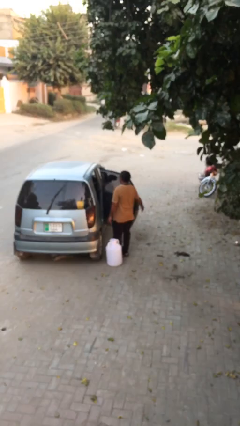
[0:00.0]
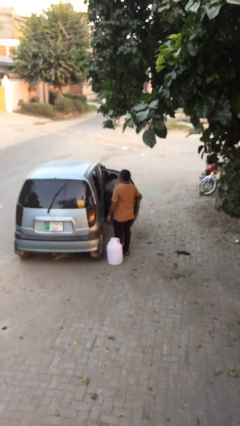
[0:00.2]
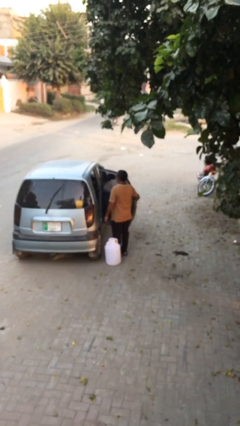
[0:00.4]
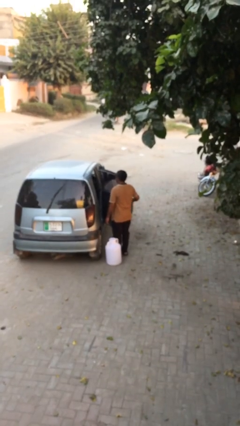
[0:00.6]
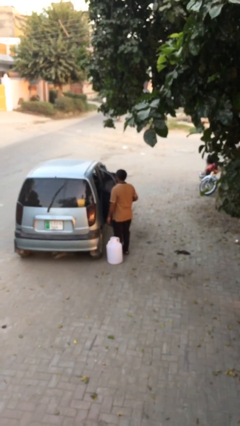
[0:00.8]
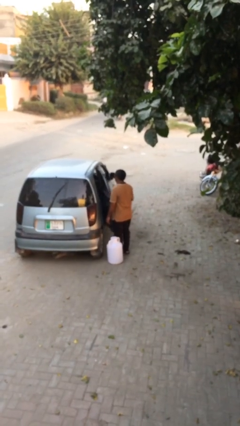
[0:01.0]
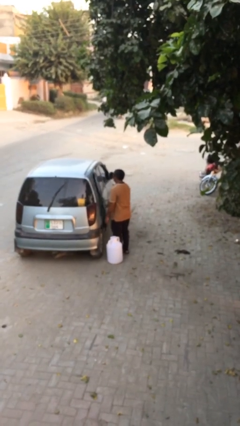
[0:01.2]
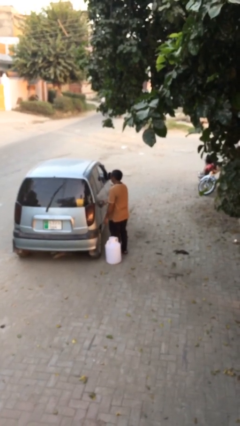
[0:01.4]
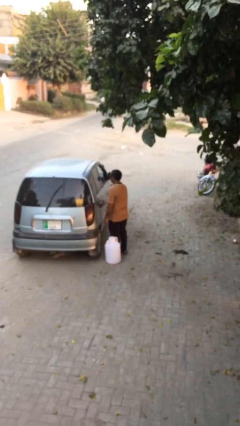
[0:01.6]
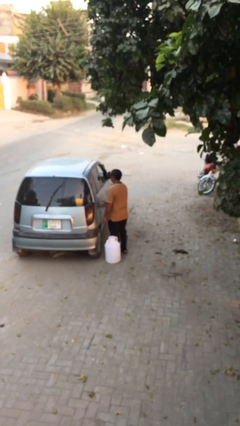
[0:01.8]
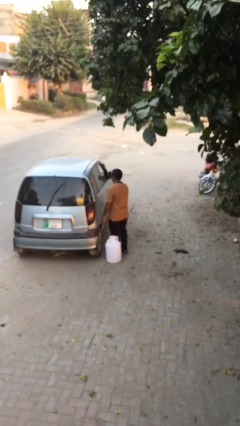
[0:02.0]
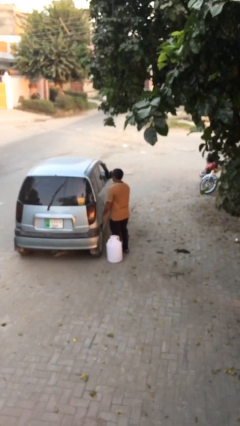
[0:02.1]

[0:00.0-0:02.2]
person closes car door

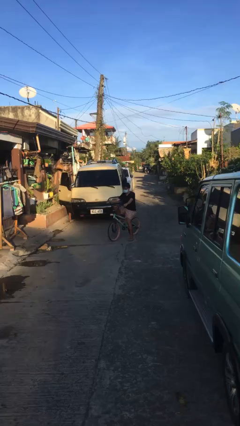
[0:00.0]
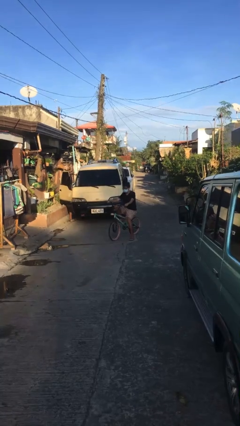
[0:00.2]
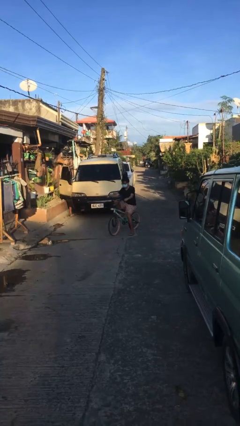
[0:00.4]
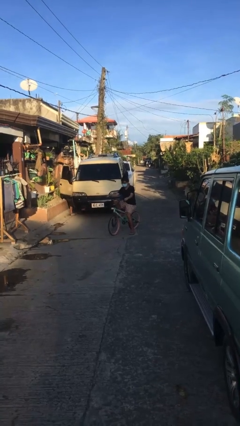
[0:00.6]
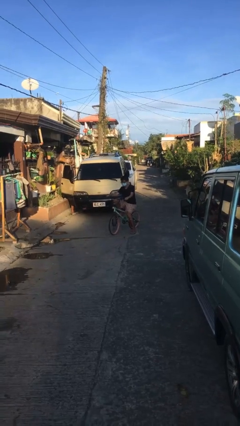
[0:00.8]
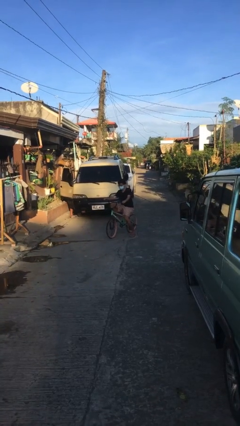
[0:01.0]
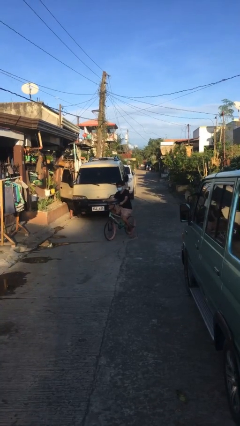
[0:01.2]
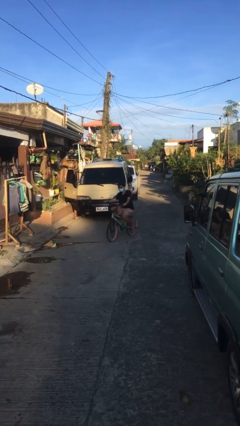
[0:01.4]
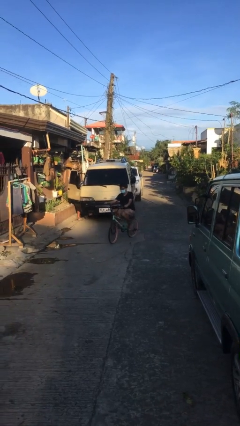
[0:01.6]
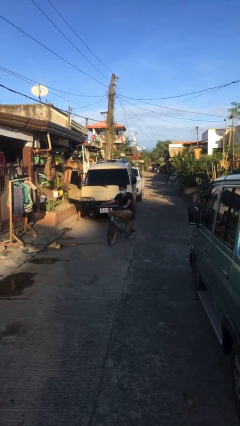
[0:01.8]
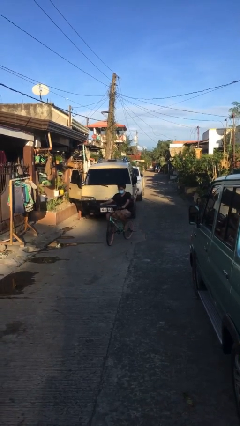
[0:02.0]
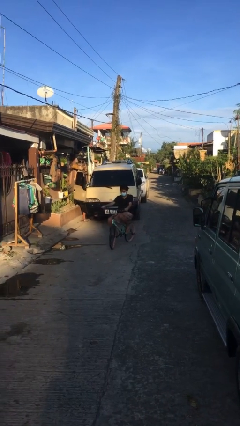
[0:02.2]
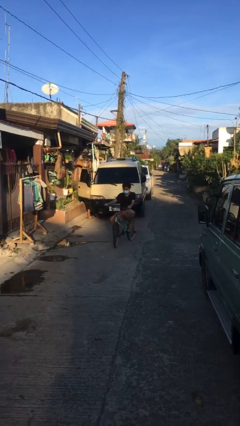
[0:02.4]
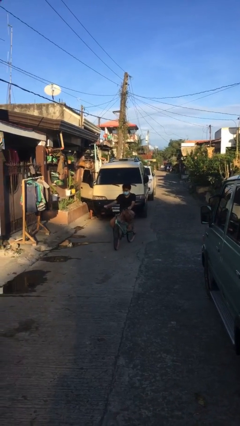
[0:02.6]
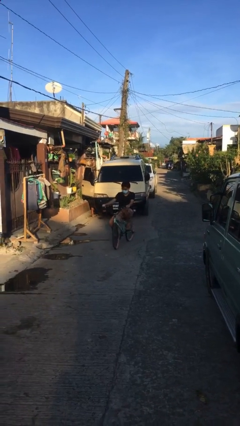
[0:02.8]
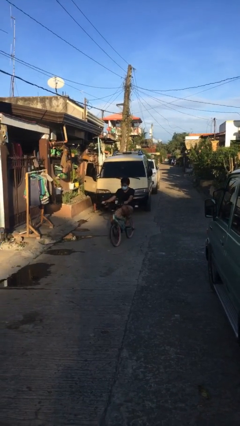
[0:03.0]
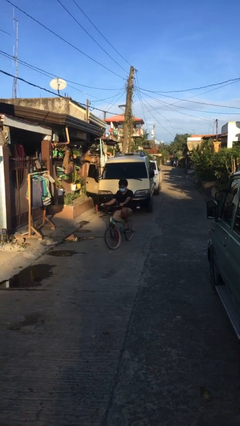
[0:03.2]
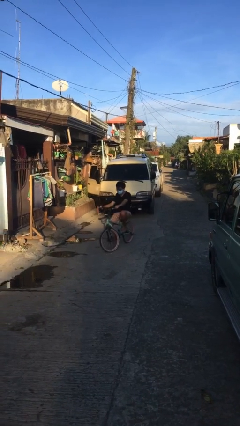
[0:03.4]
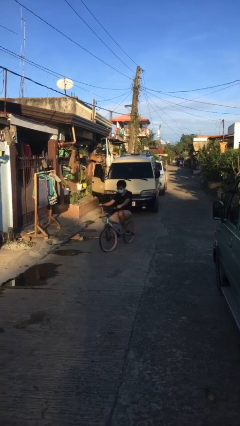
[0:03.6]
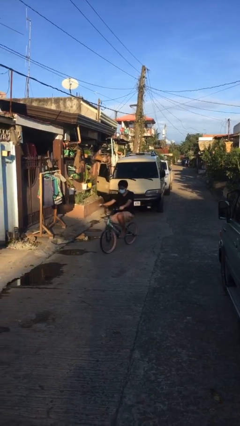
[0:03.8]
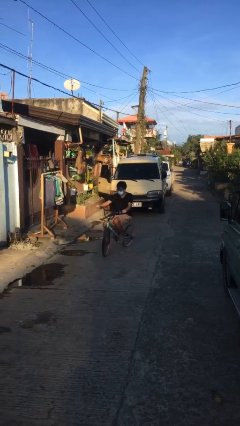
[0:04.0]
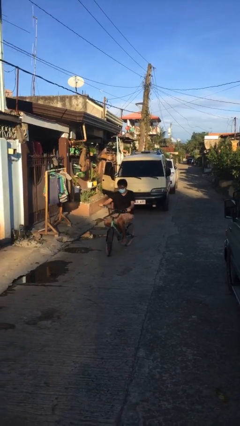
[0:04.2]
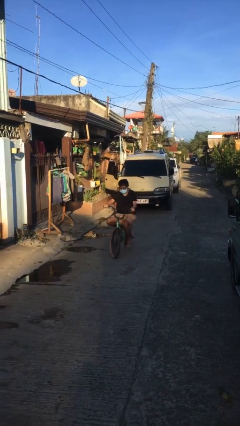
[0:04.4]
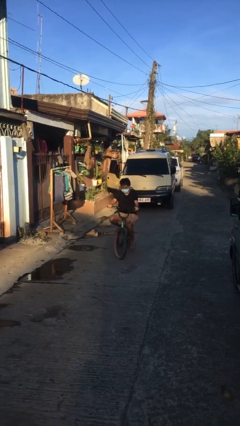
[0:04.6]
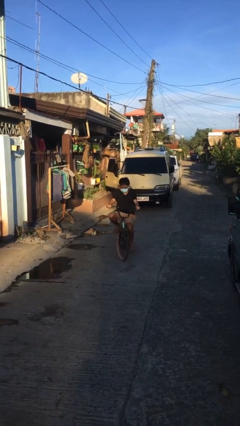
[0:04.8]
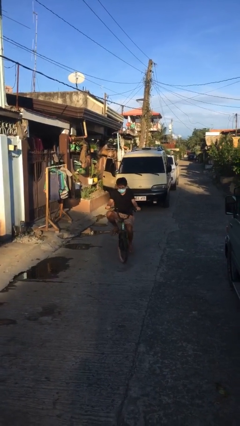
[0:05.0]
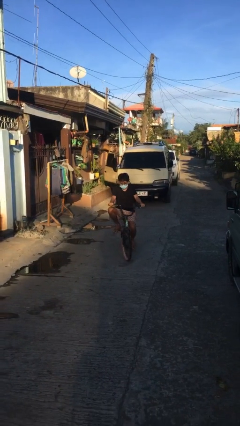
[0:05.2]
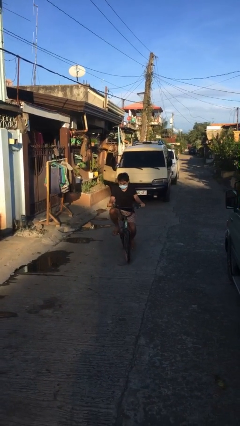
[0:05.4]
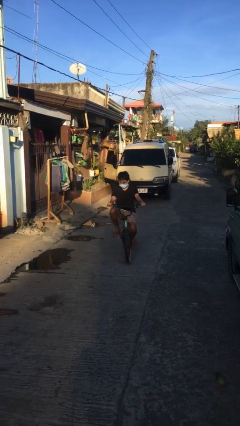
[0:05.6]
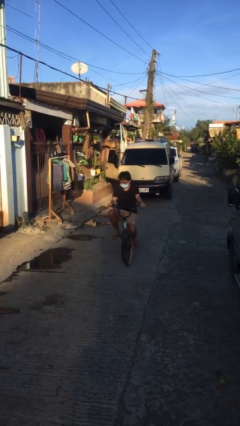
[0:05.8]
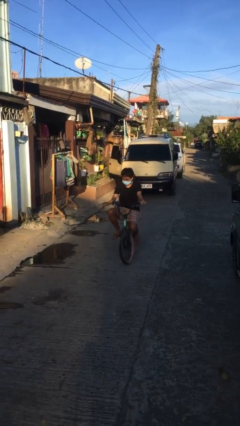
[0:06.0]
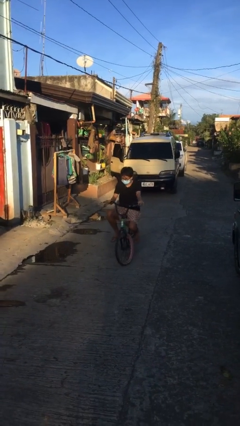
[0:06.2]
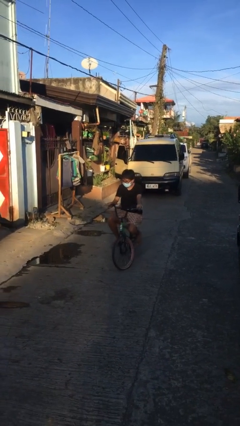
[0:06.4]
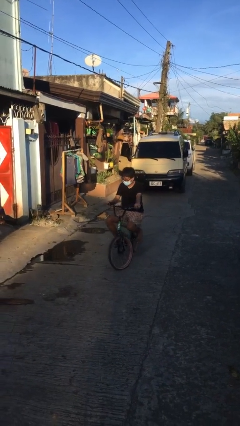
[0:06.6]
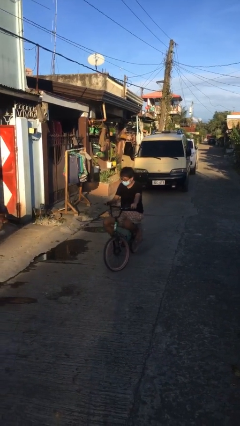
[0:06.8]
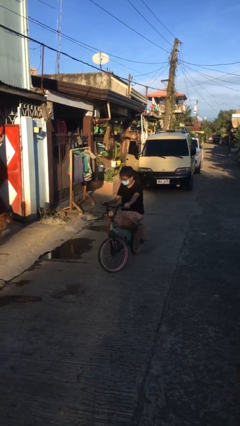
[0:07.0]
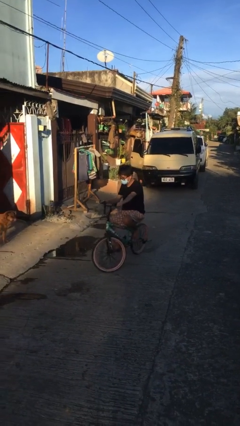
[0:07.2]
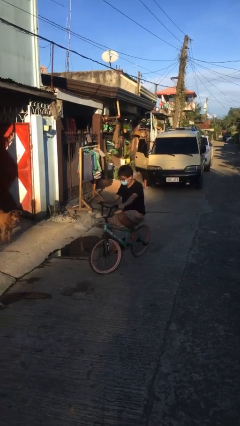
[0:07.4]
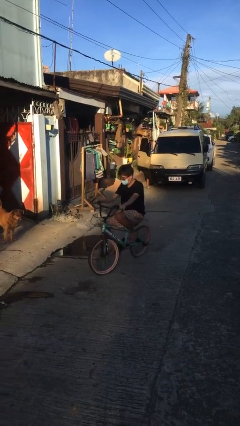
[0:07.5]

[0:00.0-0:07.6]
person rides bicycle

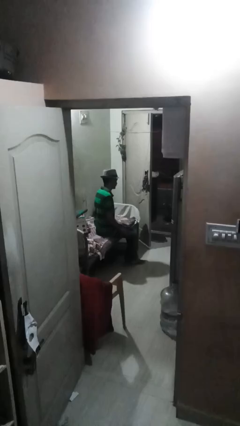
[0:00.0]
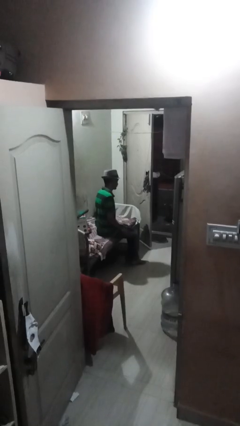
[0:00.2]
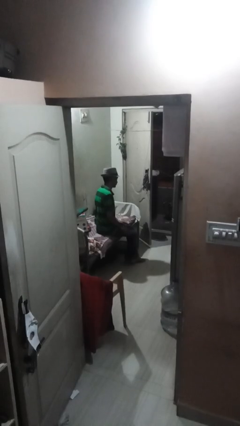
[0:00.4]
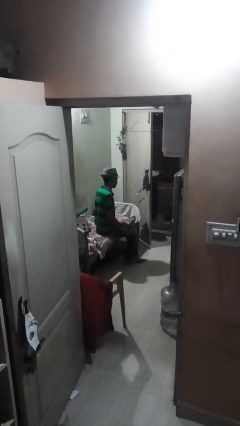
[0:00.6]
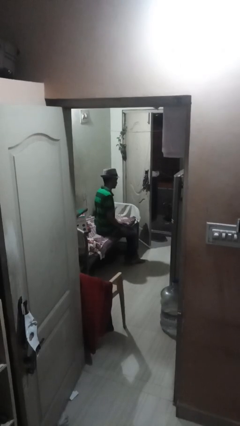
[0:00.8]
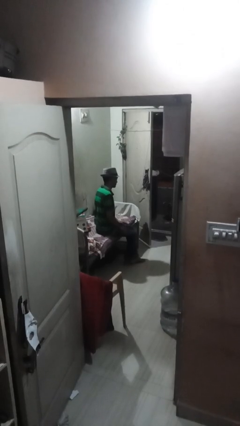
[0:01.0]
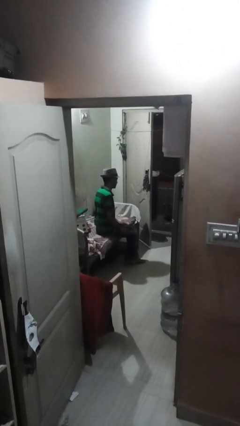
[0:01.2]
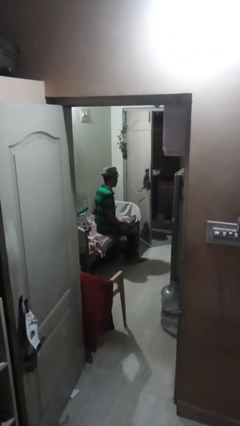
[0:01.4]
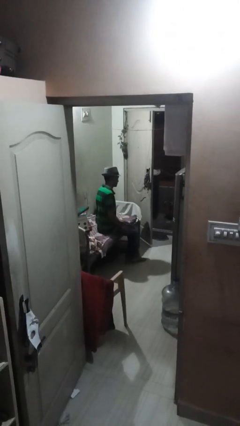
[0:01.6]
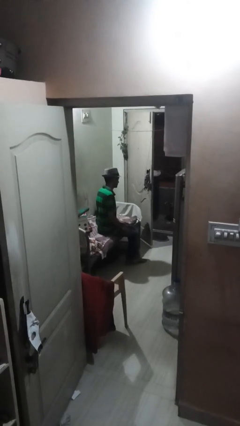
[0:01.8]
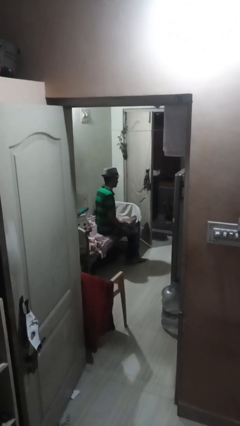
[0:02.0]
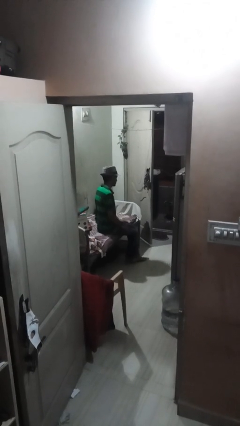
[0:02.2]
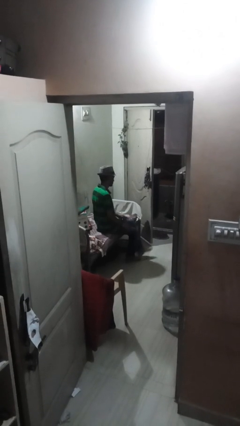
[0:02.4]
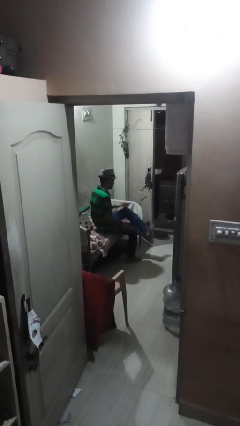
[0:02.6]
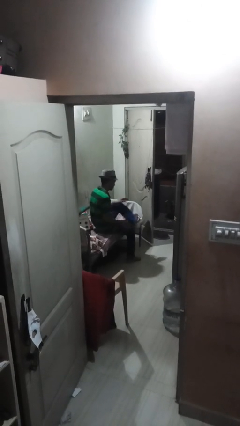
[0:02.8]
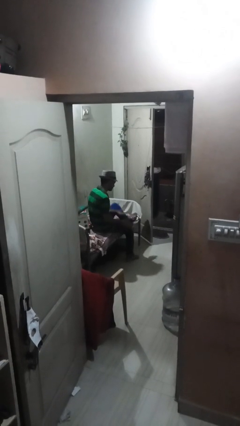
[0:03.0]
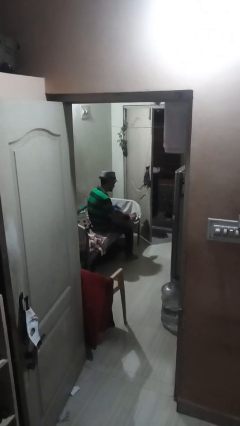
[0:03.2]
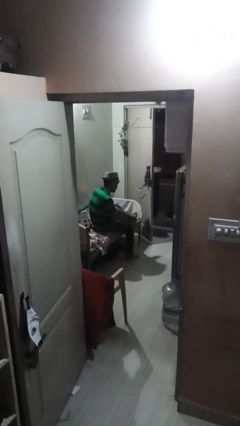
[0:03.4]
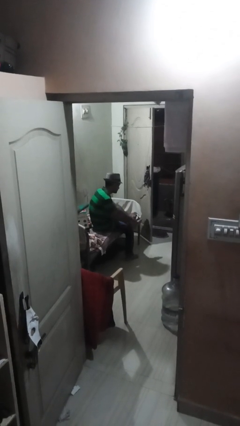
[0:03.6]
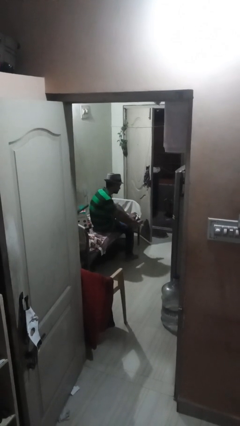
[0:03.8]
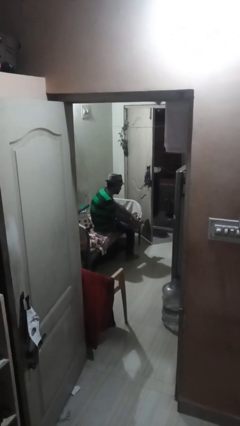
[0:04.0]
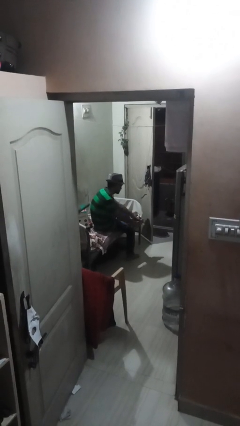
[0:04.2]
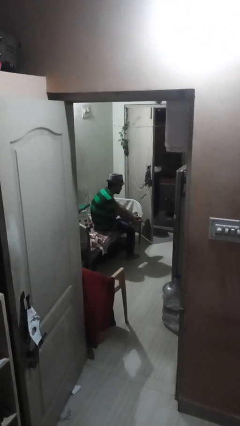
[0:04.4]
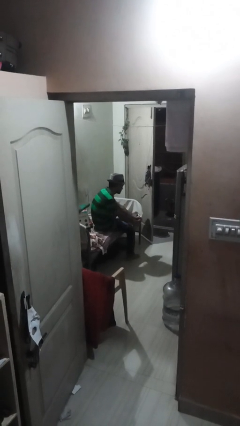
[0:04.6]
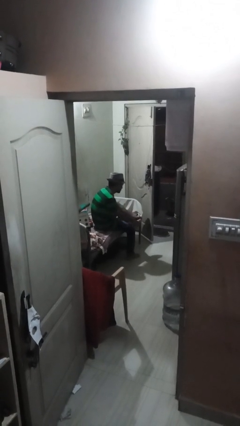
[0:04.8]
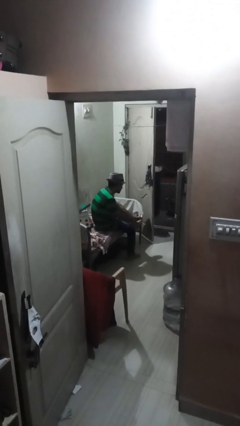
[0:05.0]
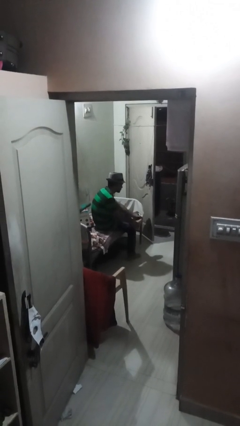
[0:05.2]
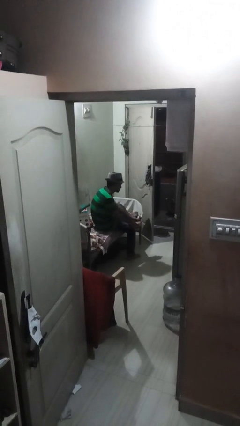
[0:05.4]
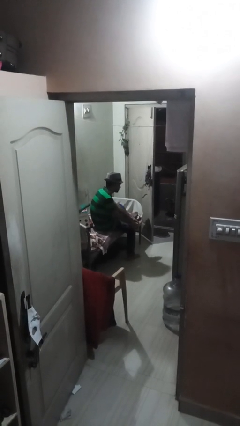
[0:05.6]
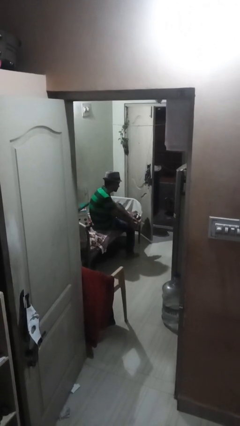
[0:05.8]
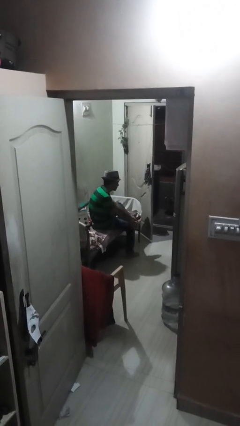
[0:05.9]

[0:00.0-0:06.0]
person rubs foot

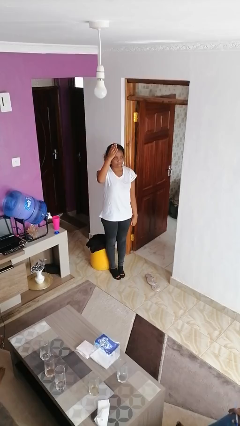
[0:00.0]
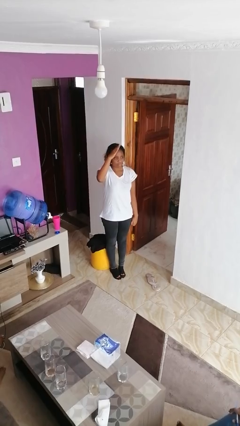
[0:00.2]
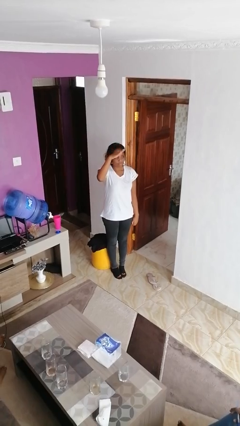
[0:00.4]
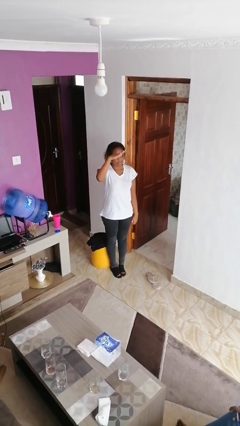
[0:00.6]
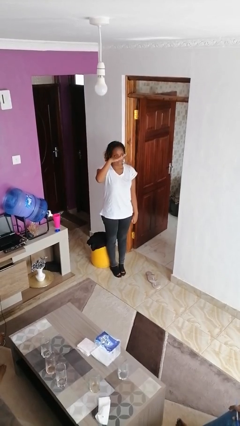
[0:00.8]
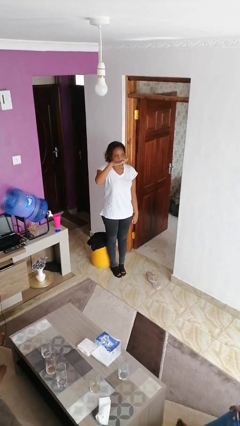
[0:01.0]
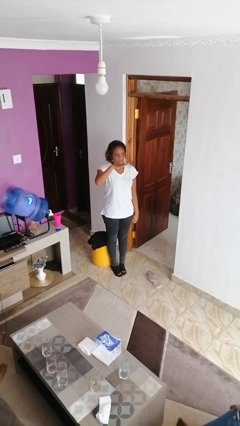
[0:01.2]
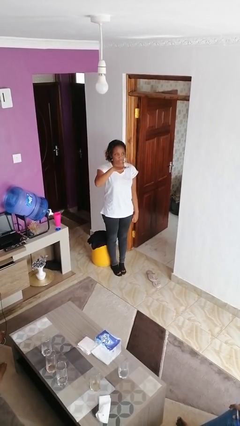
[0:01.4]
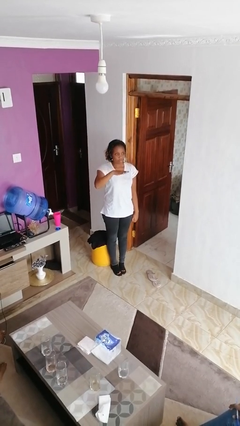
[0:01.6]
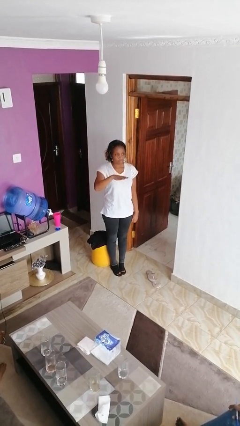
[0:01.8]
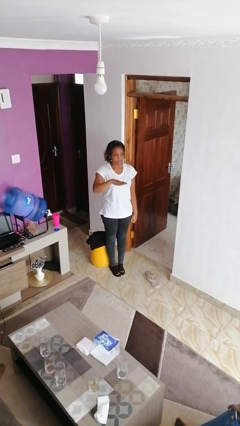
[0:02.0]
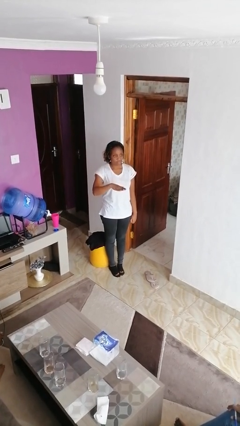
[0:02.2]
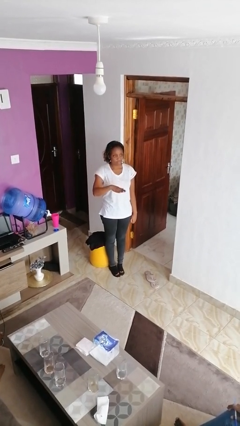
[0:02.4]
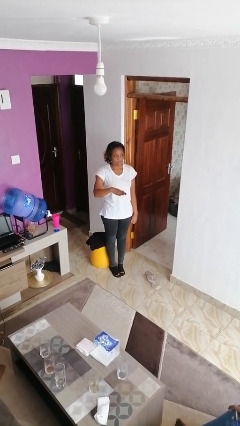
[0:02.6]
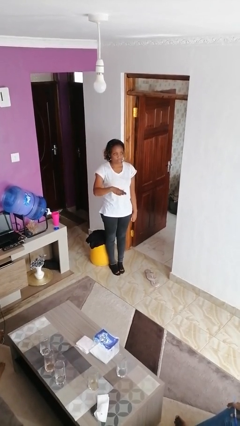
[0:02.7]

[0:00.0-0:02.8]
person gestures swipe down
